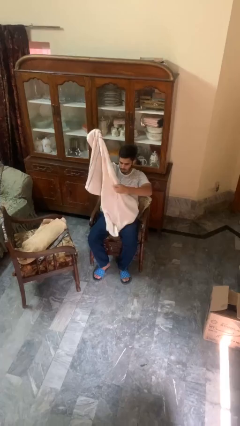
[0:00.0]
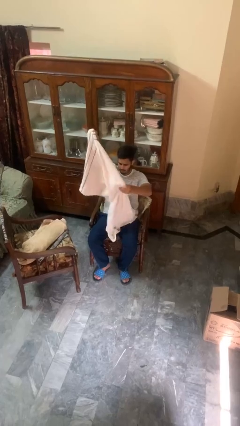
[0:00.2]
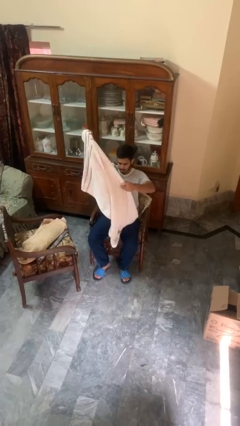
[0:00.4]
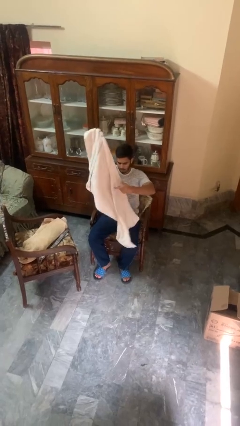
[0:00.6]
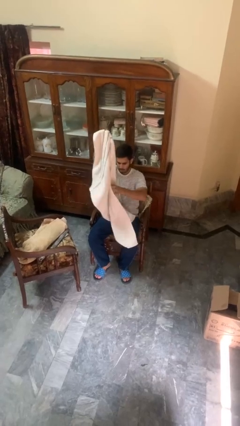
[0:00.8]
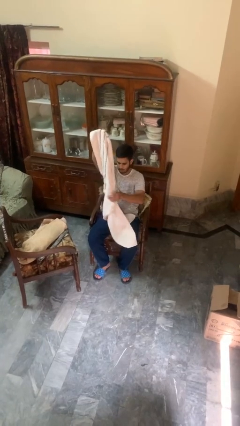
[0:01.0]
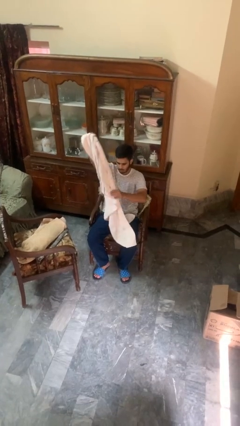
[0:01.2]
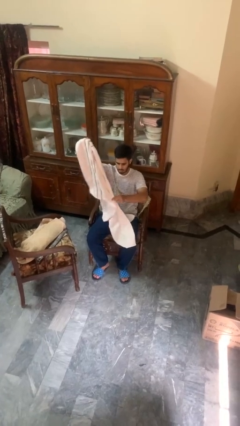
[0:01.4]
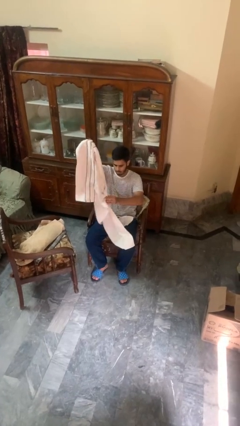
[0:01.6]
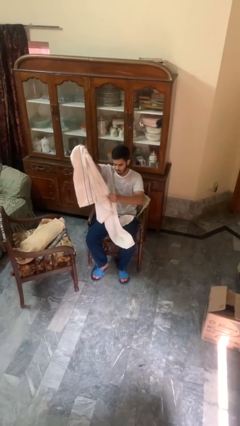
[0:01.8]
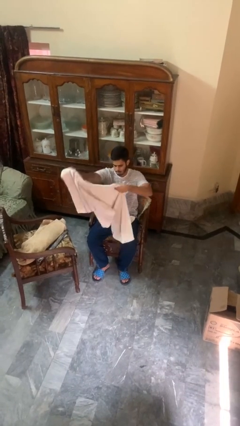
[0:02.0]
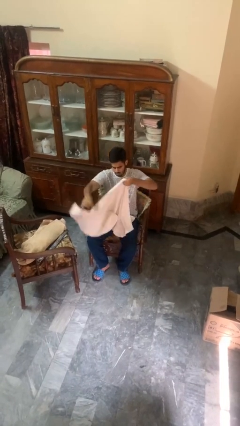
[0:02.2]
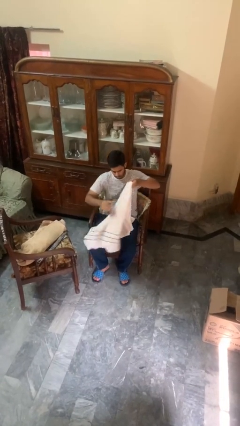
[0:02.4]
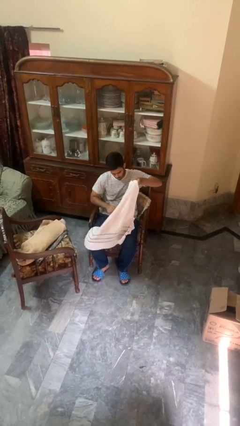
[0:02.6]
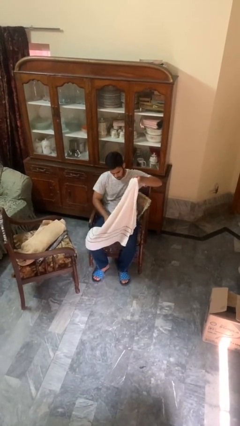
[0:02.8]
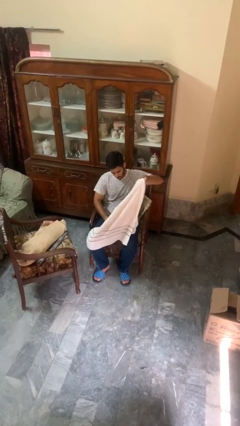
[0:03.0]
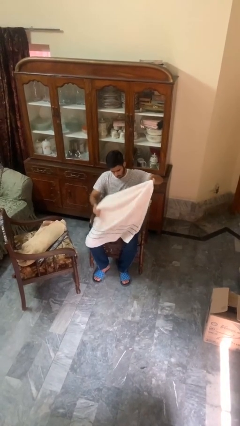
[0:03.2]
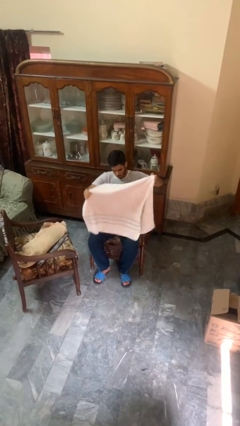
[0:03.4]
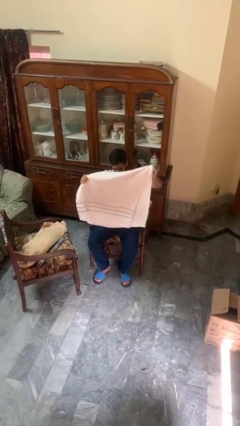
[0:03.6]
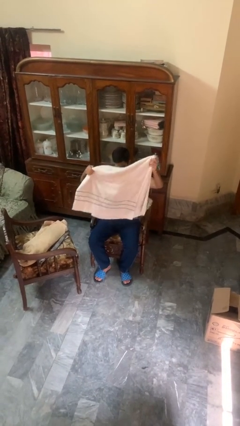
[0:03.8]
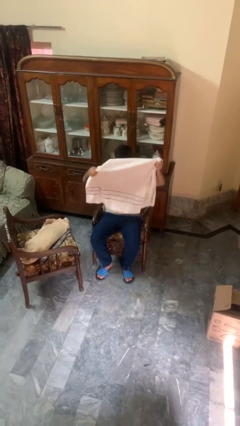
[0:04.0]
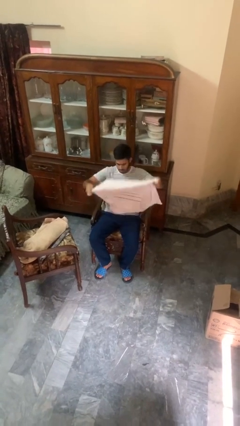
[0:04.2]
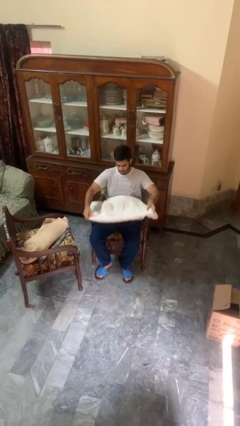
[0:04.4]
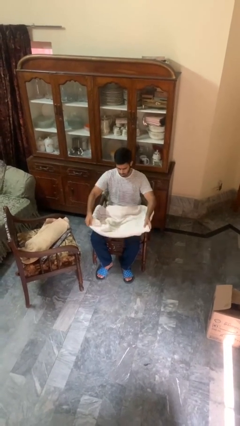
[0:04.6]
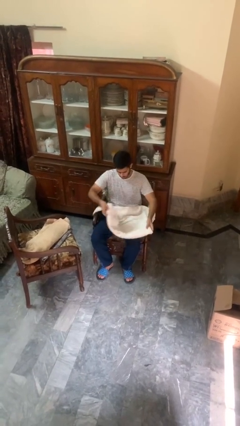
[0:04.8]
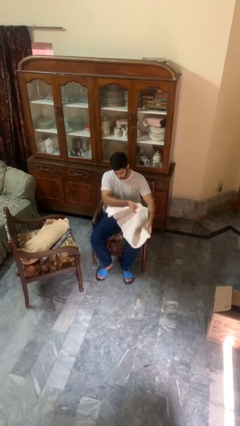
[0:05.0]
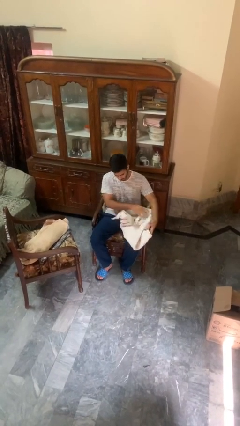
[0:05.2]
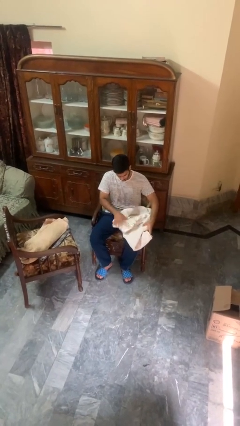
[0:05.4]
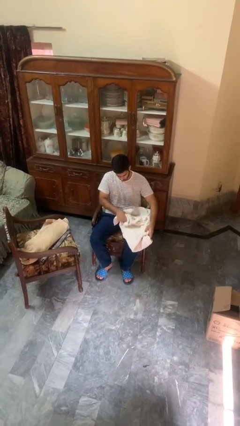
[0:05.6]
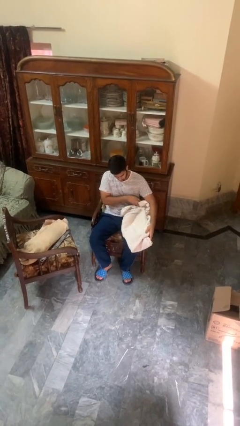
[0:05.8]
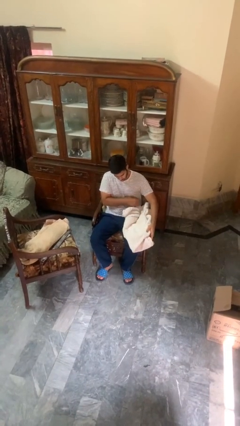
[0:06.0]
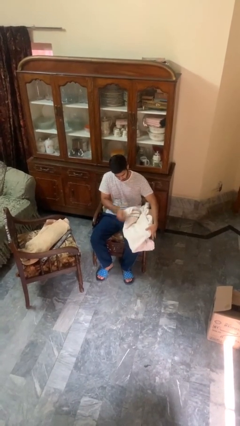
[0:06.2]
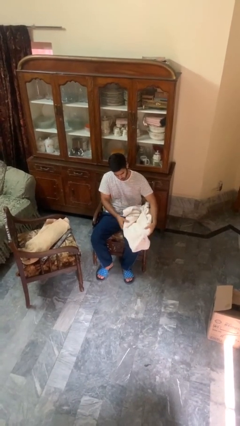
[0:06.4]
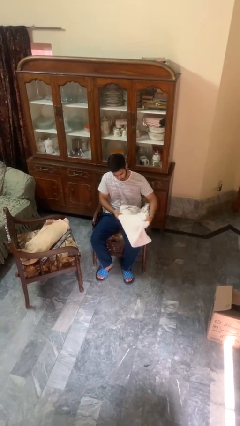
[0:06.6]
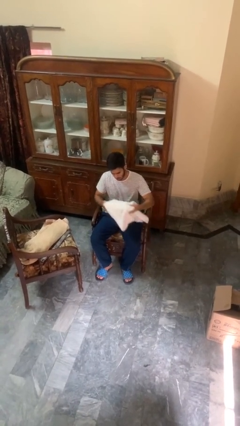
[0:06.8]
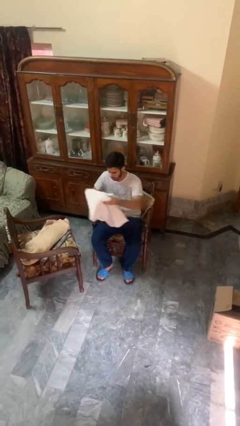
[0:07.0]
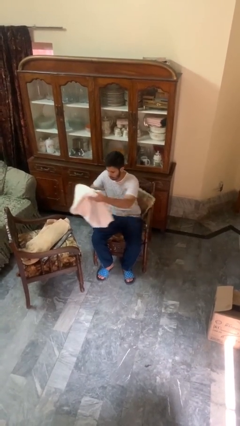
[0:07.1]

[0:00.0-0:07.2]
person folds towel

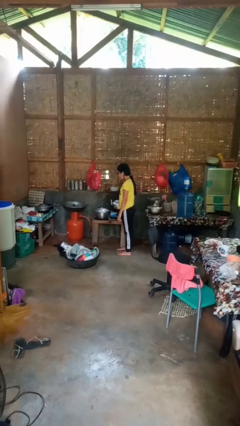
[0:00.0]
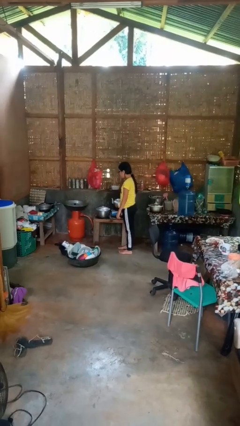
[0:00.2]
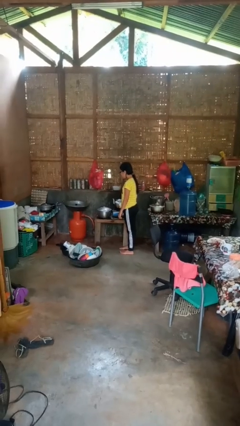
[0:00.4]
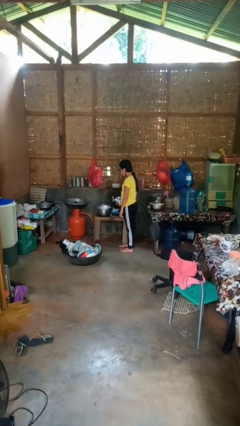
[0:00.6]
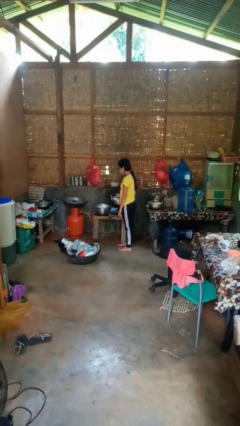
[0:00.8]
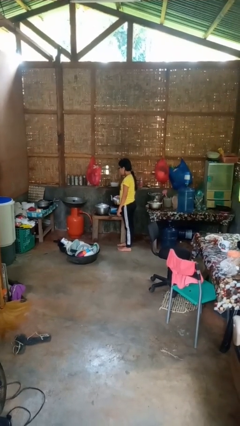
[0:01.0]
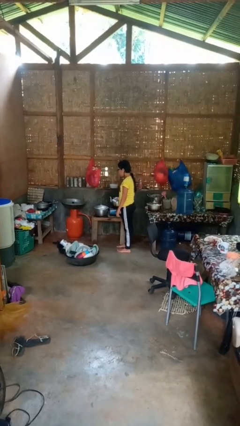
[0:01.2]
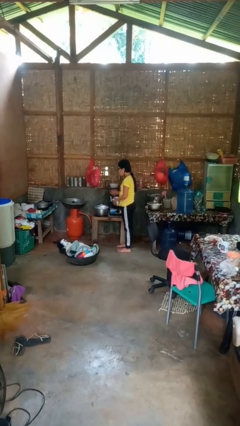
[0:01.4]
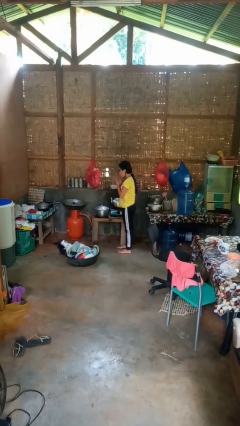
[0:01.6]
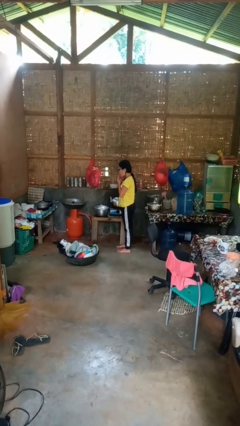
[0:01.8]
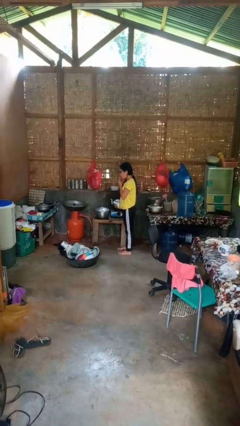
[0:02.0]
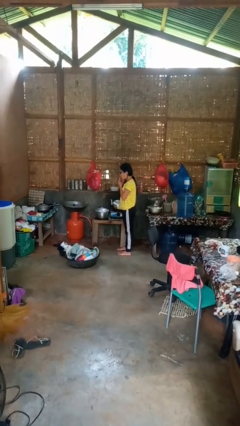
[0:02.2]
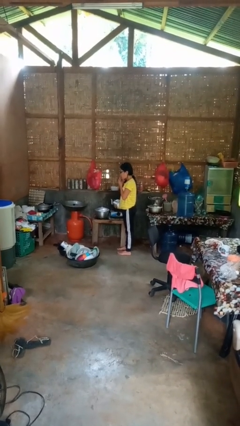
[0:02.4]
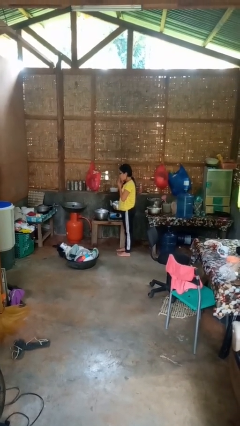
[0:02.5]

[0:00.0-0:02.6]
person burns hand

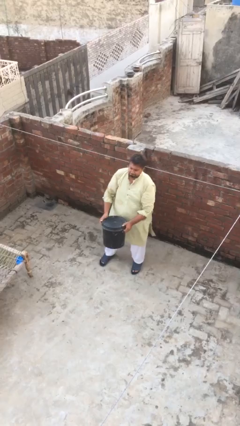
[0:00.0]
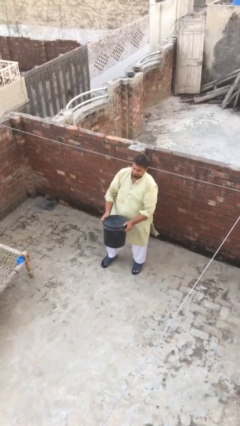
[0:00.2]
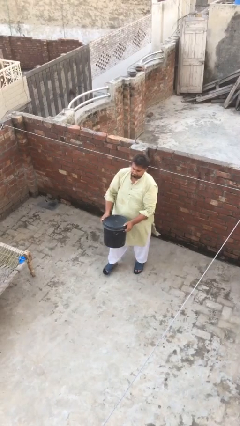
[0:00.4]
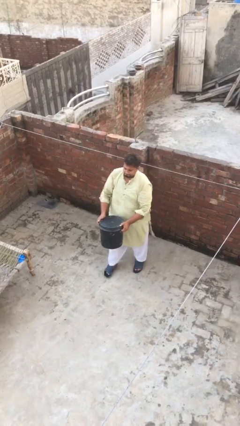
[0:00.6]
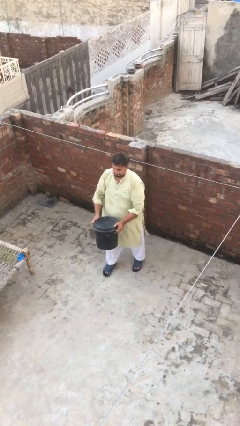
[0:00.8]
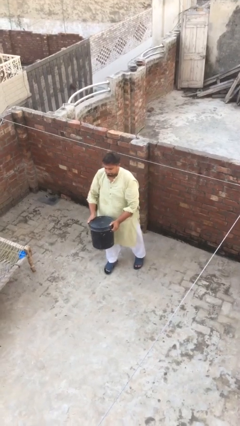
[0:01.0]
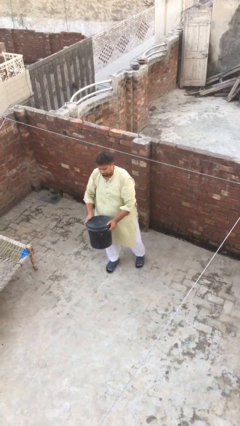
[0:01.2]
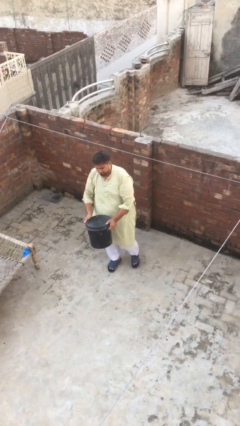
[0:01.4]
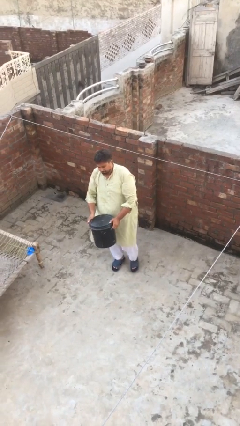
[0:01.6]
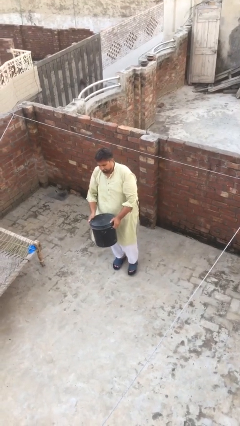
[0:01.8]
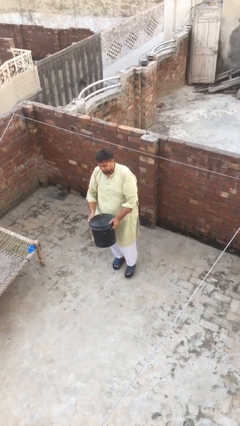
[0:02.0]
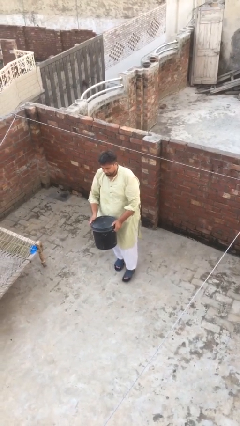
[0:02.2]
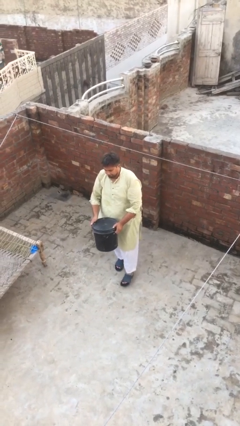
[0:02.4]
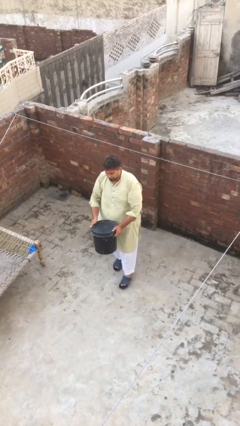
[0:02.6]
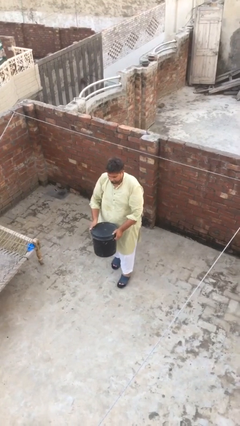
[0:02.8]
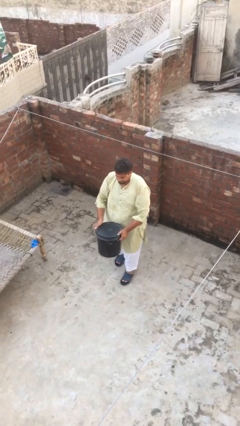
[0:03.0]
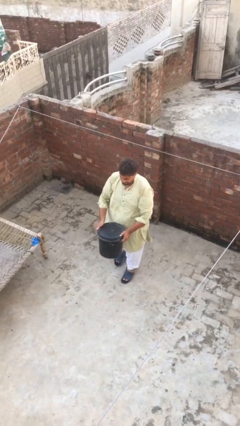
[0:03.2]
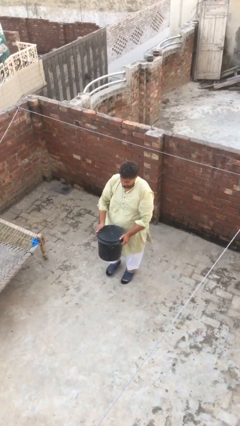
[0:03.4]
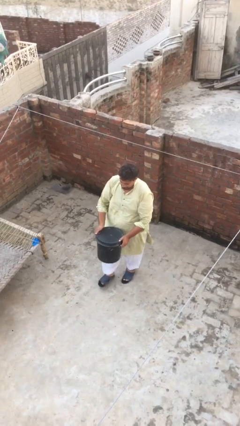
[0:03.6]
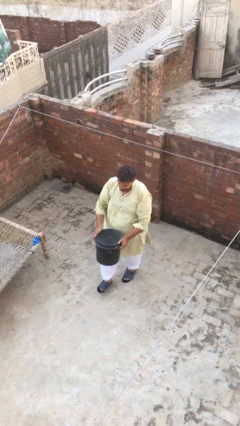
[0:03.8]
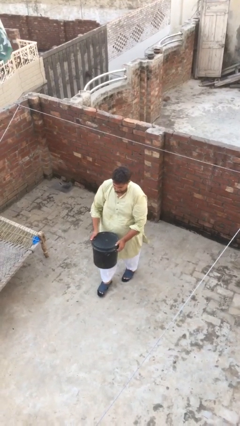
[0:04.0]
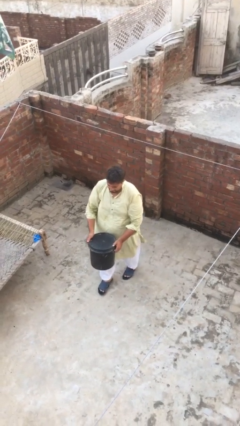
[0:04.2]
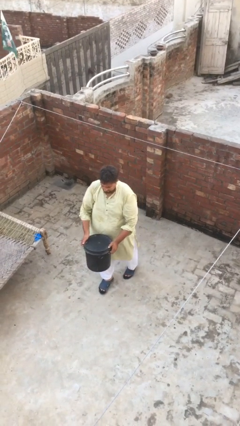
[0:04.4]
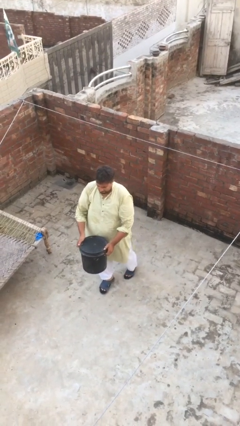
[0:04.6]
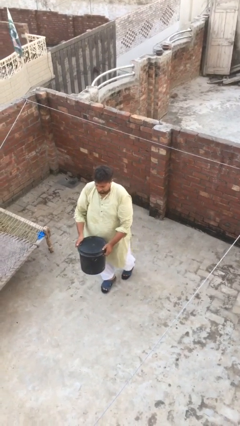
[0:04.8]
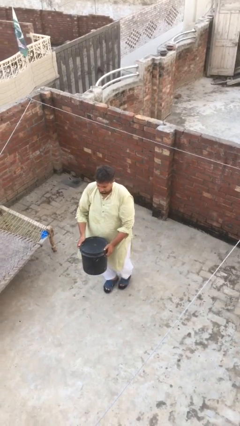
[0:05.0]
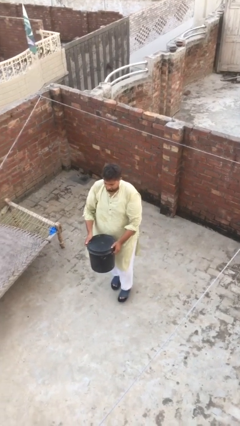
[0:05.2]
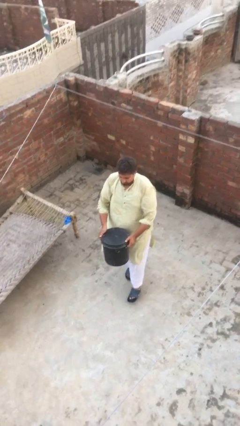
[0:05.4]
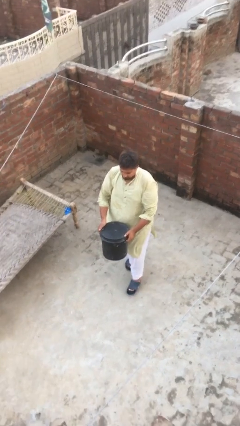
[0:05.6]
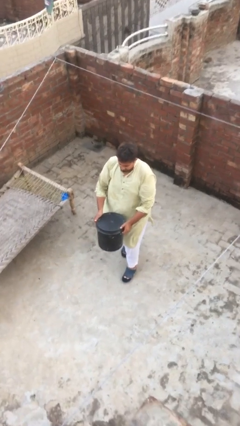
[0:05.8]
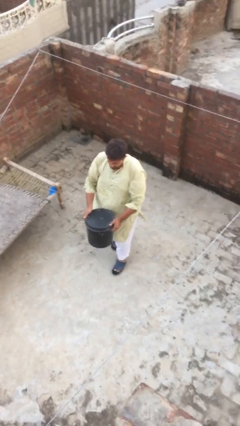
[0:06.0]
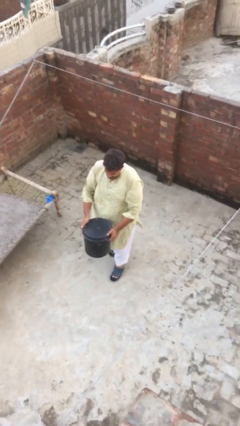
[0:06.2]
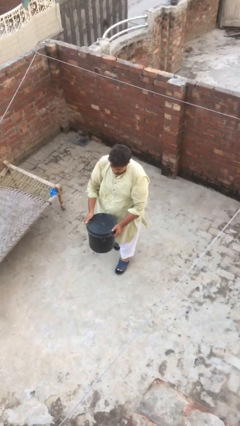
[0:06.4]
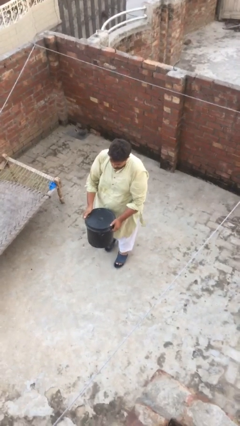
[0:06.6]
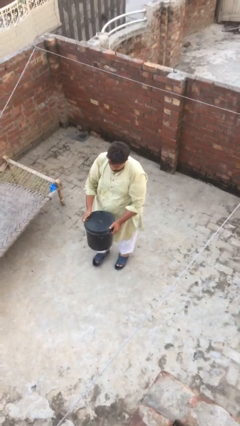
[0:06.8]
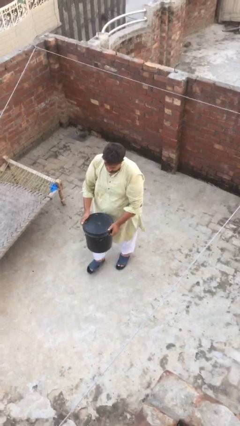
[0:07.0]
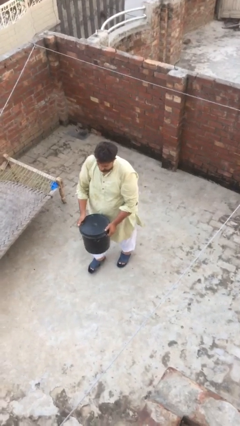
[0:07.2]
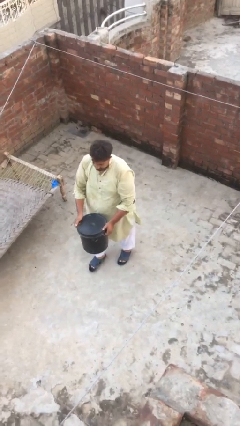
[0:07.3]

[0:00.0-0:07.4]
person carries heavy object
